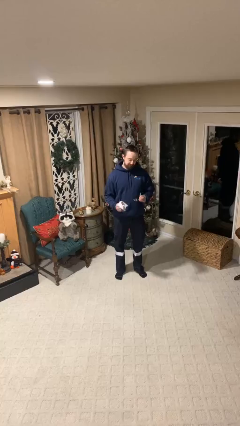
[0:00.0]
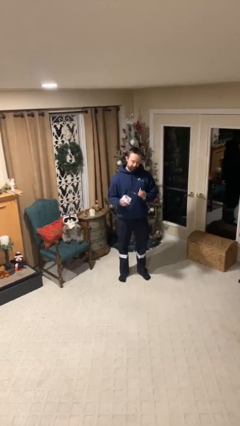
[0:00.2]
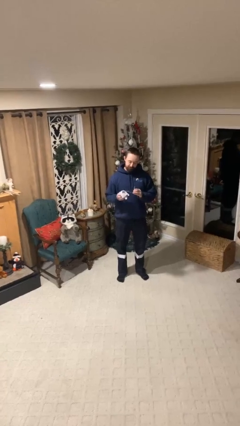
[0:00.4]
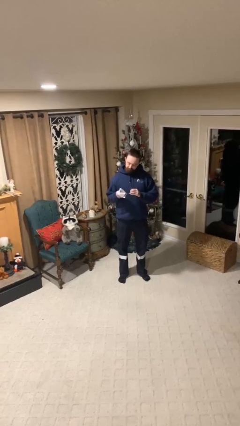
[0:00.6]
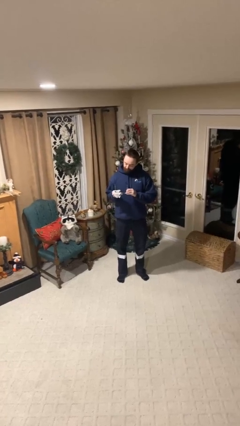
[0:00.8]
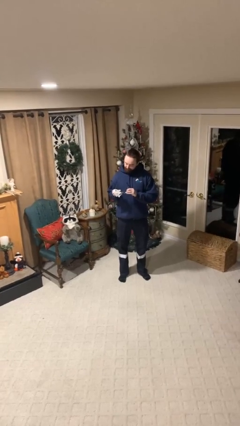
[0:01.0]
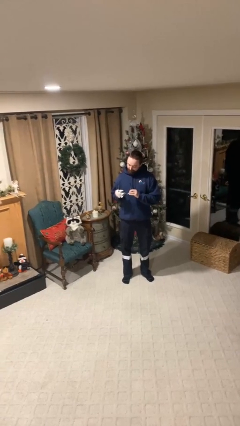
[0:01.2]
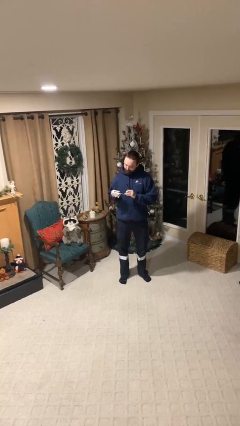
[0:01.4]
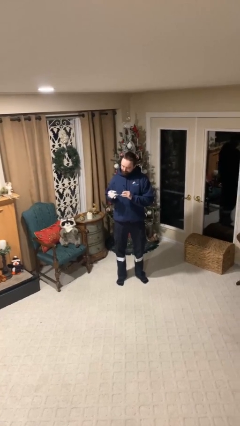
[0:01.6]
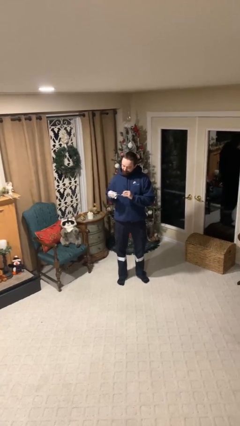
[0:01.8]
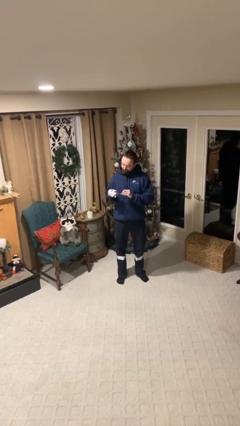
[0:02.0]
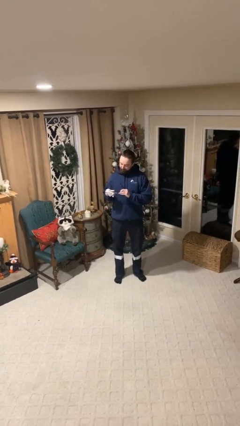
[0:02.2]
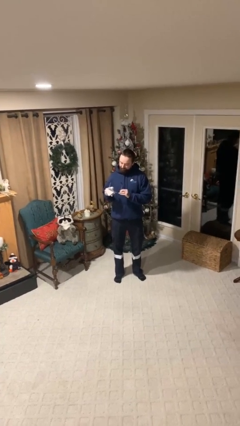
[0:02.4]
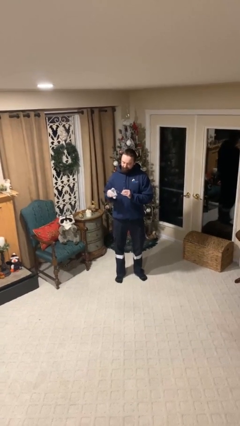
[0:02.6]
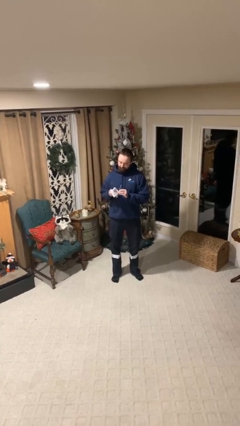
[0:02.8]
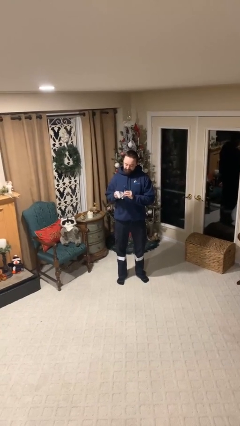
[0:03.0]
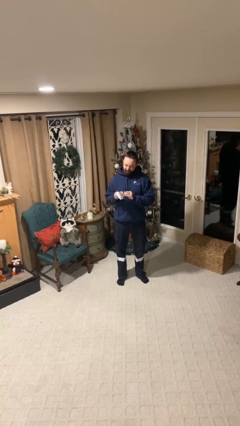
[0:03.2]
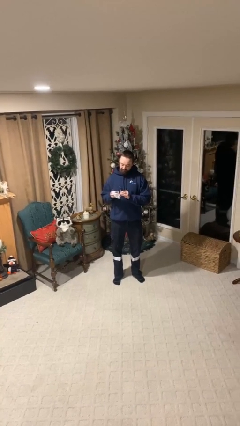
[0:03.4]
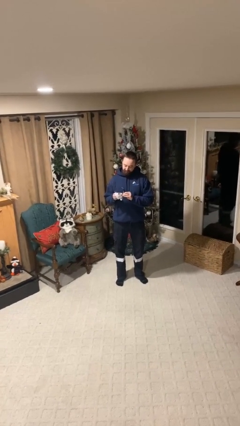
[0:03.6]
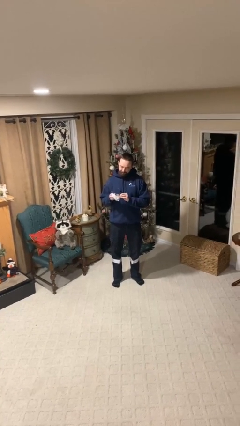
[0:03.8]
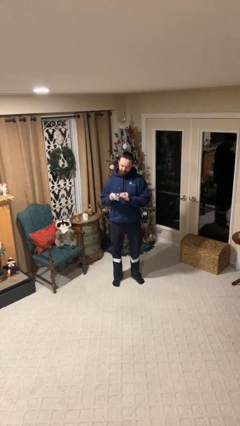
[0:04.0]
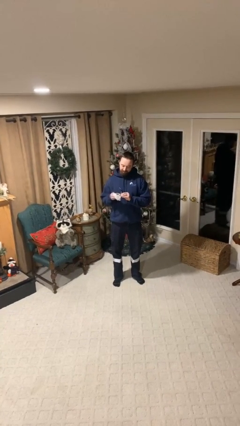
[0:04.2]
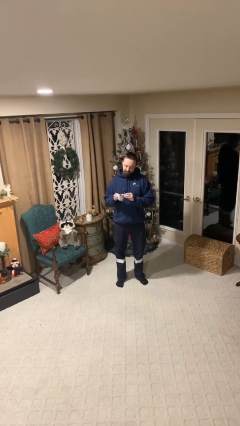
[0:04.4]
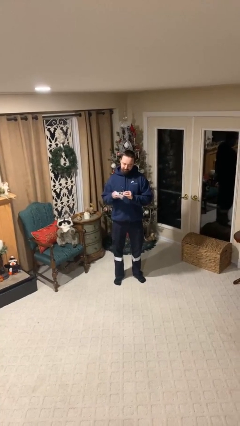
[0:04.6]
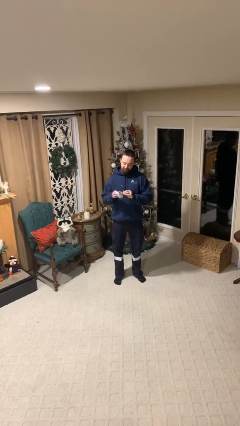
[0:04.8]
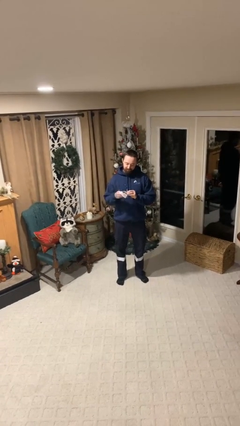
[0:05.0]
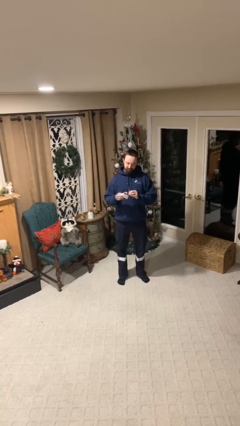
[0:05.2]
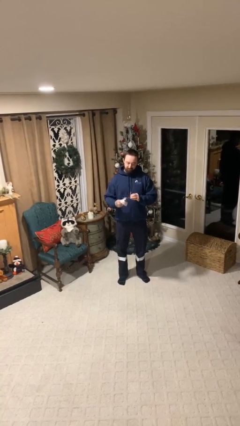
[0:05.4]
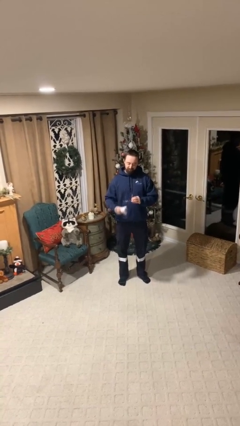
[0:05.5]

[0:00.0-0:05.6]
person cleans eyeglasses

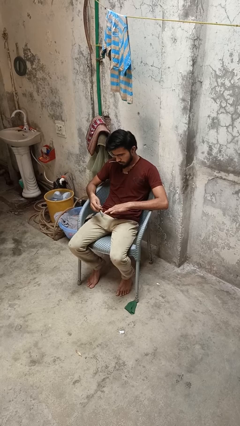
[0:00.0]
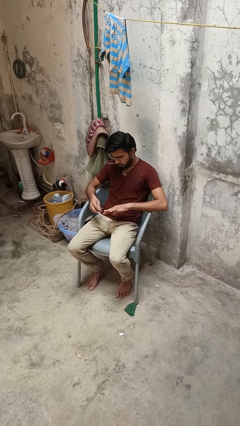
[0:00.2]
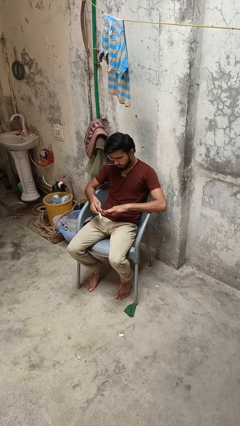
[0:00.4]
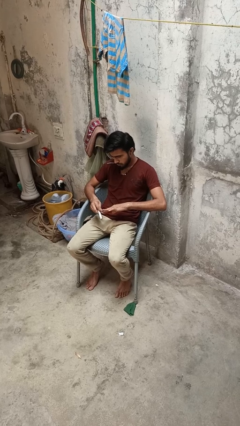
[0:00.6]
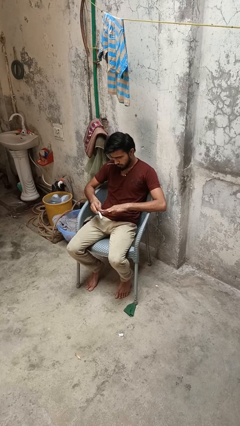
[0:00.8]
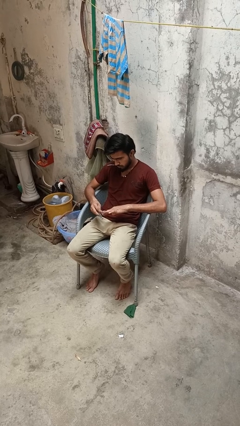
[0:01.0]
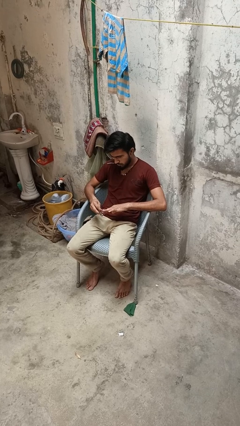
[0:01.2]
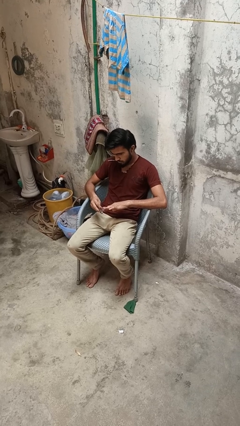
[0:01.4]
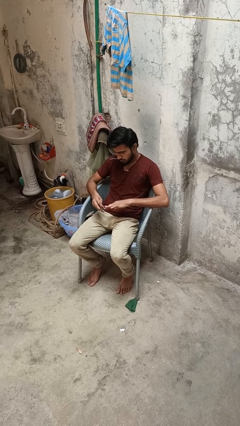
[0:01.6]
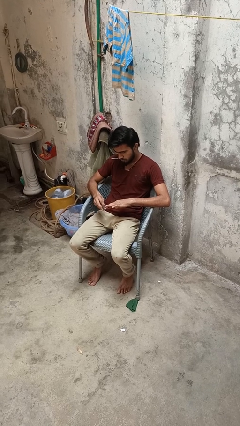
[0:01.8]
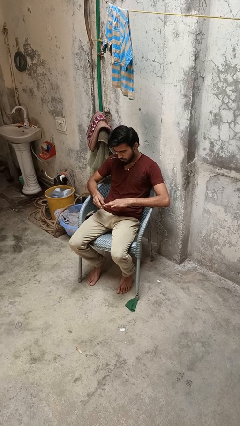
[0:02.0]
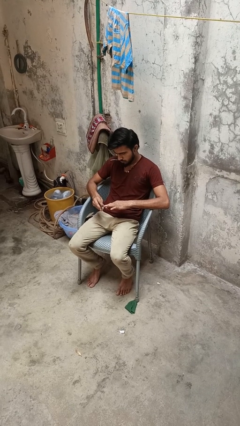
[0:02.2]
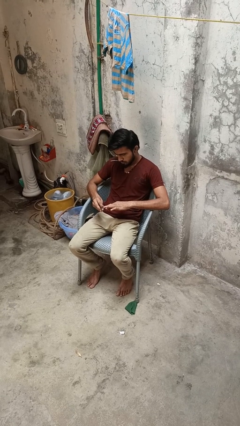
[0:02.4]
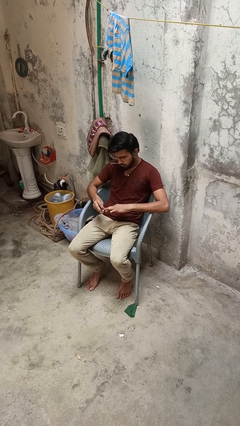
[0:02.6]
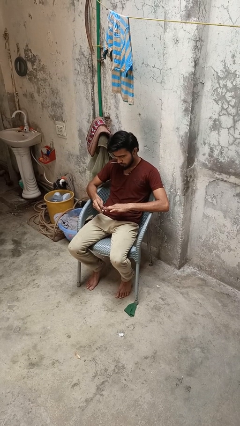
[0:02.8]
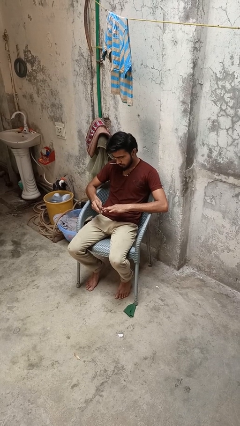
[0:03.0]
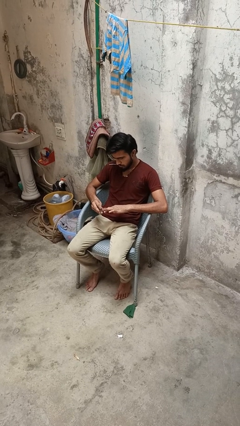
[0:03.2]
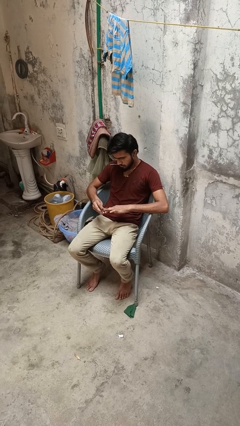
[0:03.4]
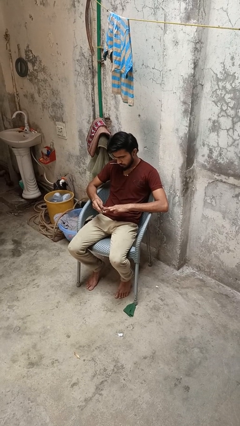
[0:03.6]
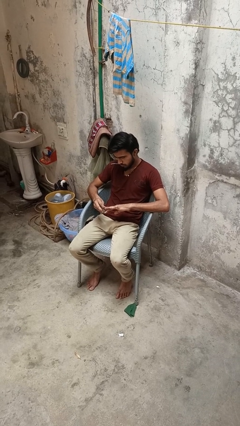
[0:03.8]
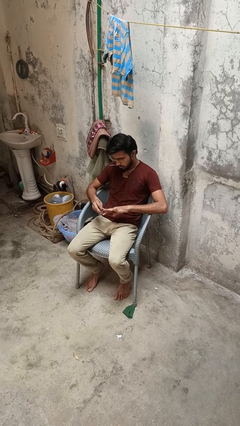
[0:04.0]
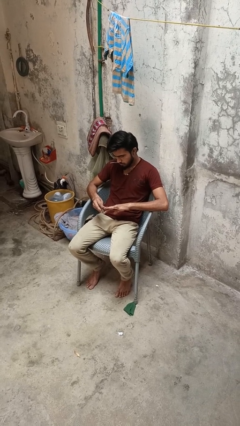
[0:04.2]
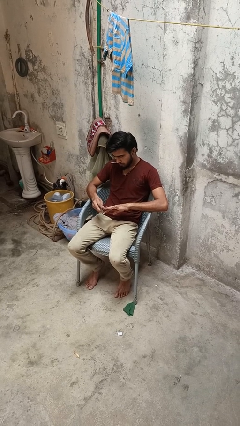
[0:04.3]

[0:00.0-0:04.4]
person files fingernails

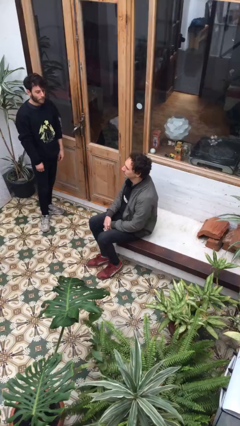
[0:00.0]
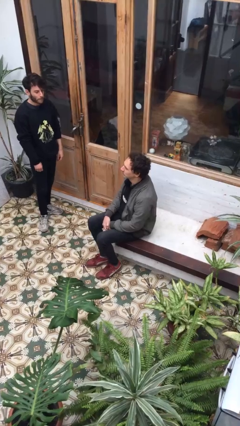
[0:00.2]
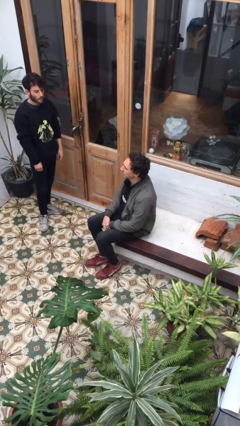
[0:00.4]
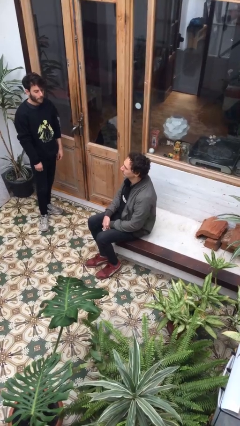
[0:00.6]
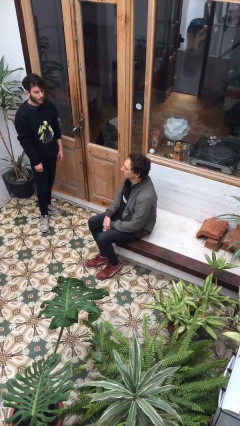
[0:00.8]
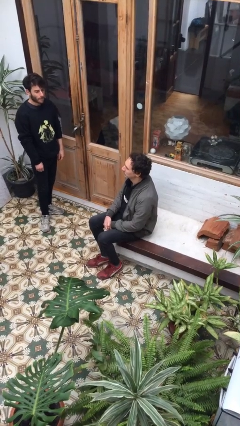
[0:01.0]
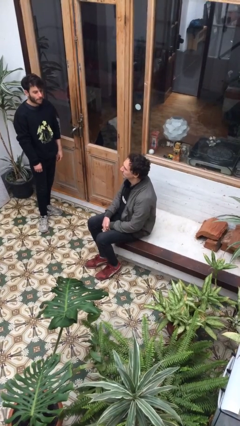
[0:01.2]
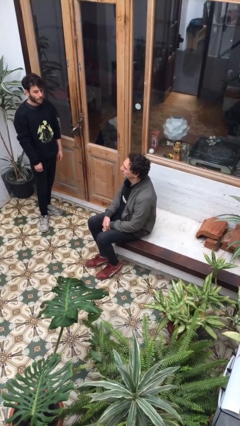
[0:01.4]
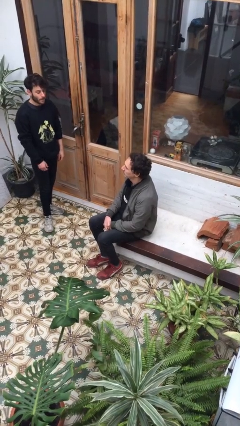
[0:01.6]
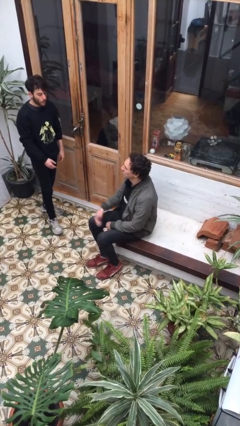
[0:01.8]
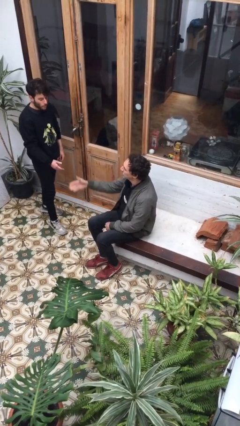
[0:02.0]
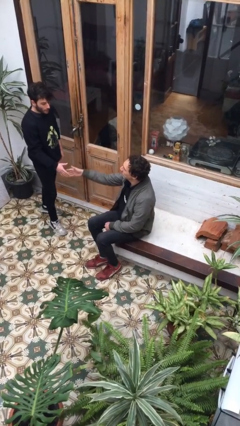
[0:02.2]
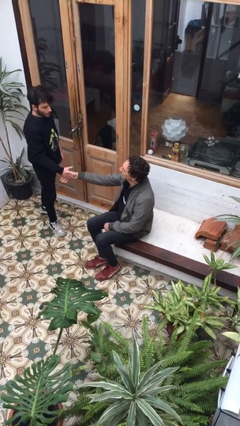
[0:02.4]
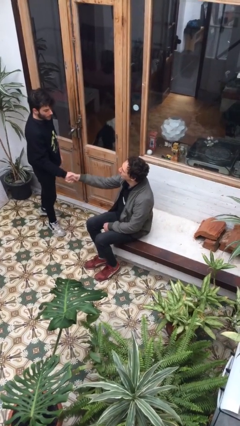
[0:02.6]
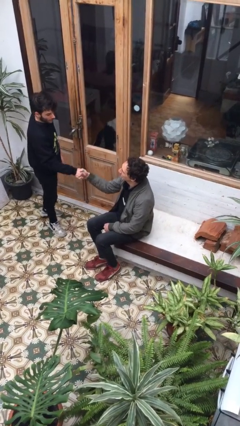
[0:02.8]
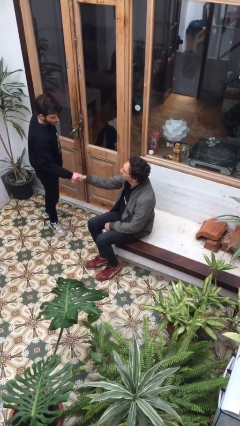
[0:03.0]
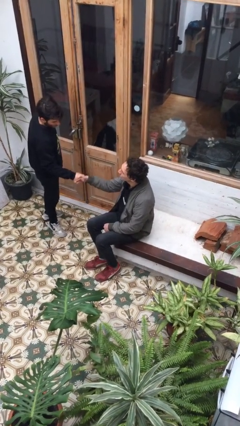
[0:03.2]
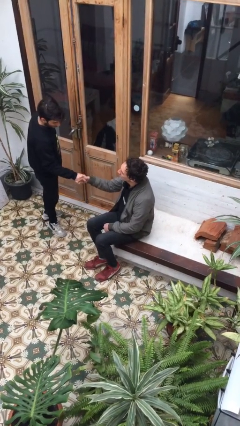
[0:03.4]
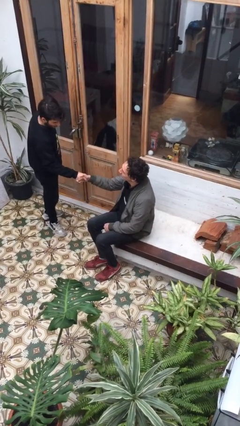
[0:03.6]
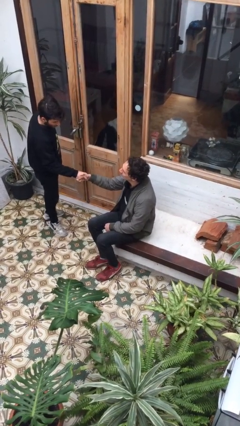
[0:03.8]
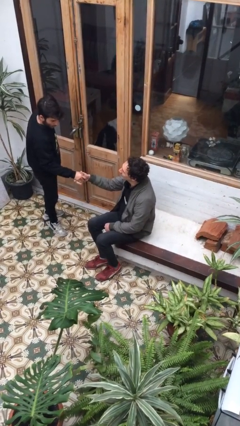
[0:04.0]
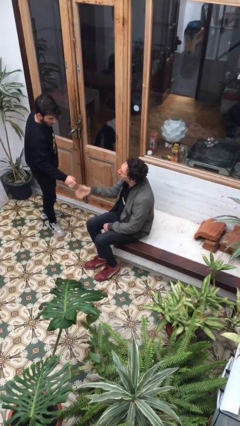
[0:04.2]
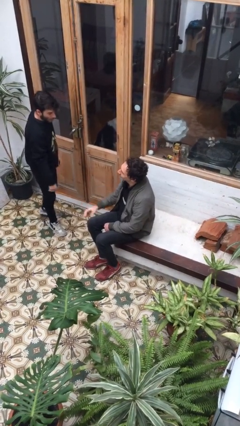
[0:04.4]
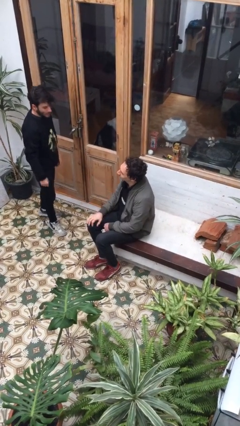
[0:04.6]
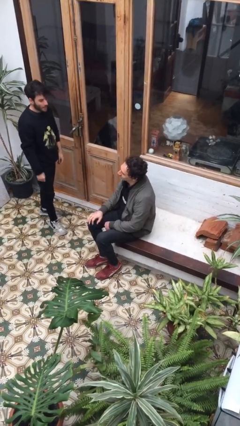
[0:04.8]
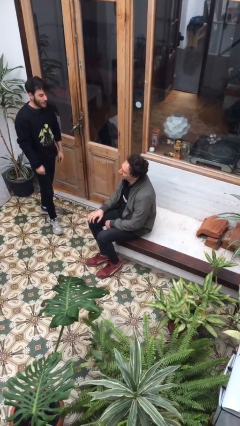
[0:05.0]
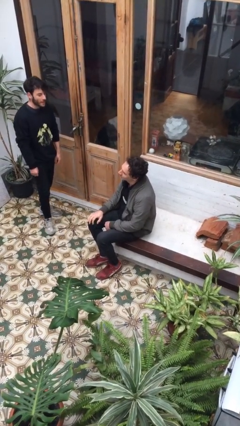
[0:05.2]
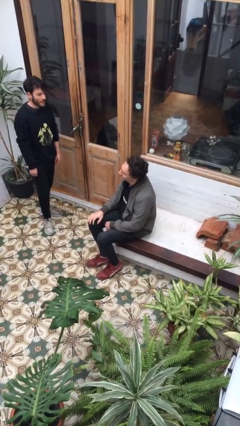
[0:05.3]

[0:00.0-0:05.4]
person shakes hand

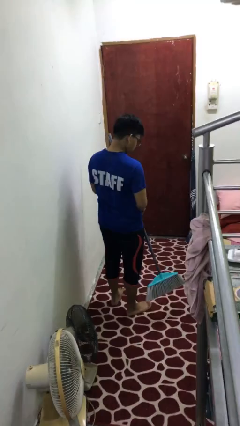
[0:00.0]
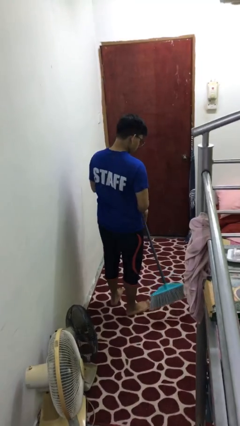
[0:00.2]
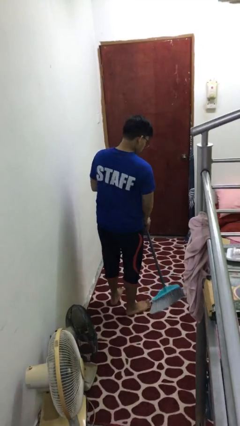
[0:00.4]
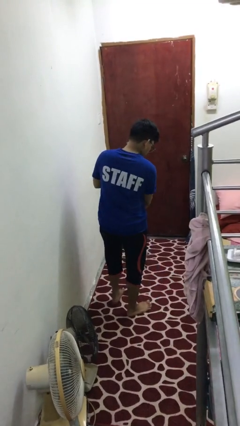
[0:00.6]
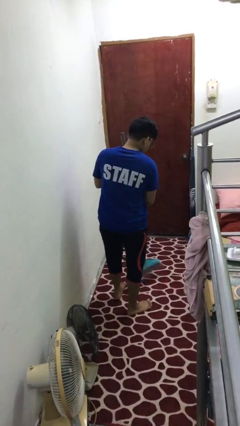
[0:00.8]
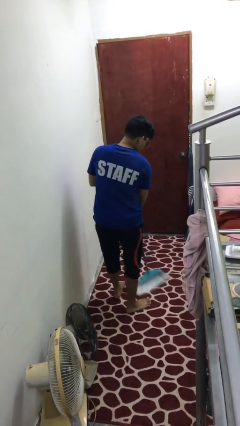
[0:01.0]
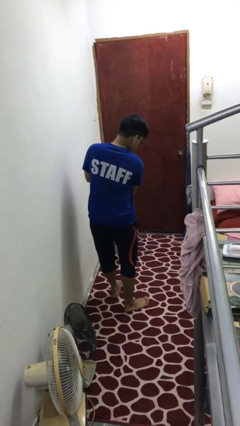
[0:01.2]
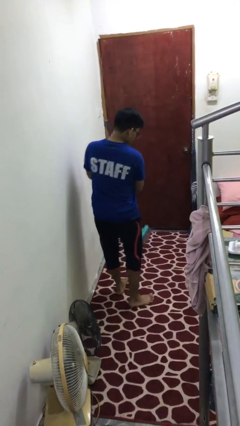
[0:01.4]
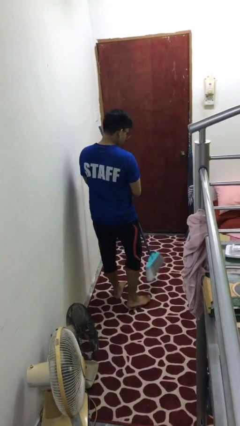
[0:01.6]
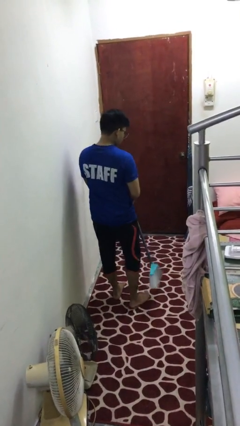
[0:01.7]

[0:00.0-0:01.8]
person sweeps floor

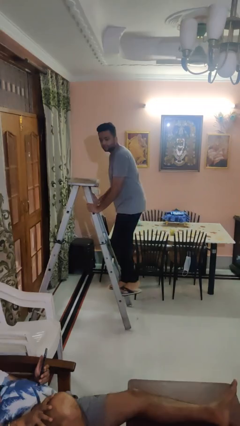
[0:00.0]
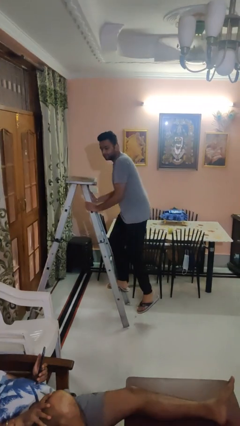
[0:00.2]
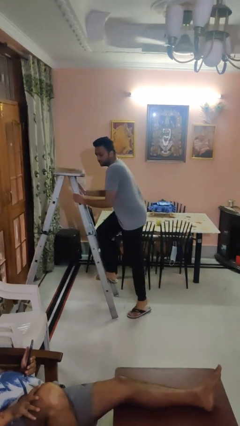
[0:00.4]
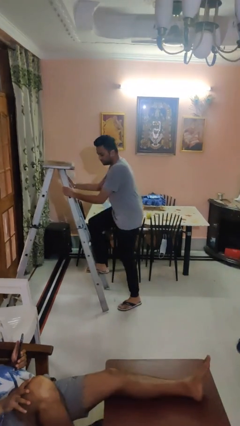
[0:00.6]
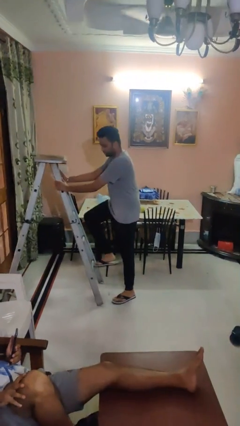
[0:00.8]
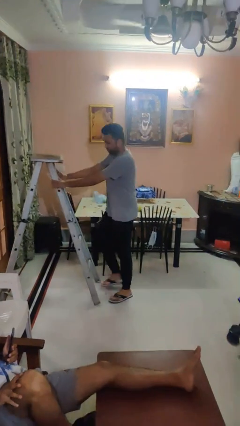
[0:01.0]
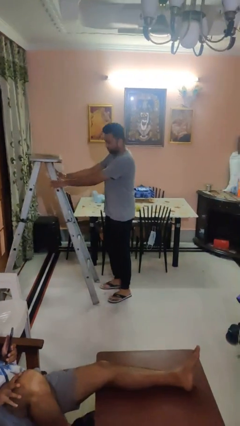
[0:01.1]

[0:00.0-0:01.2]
person climbs down ladder
